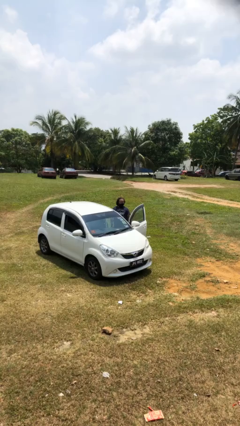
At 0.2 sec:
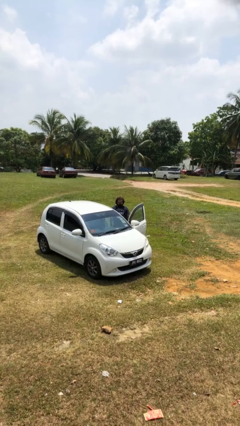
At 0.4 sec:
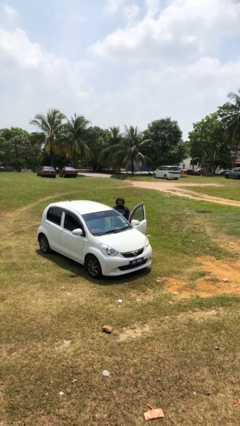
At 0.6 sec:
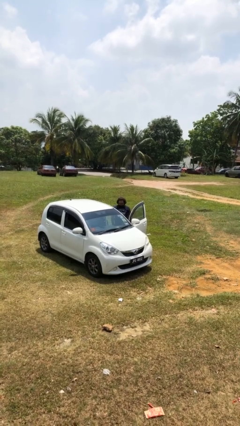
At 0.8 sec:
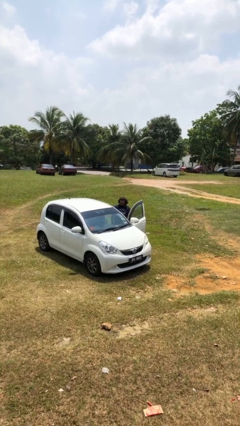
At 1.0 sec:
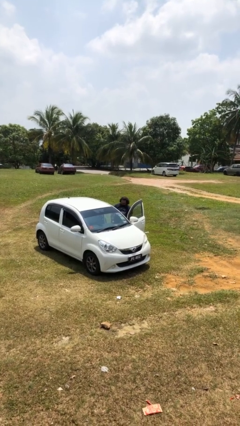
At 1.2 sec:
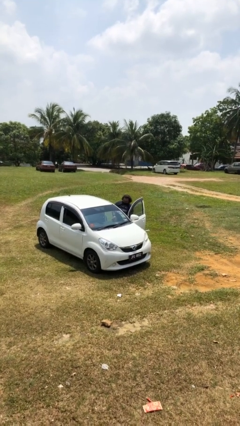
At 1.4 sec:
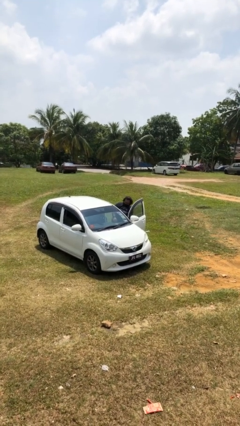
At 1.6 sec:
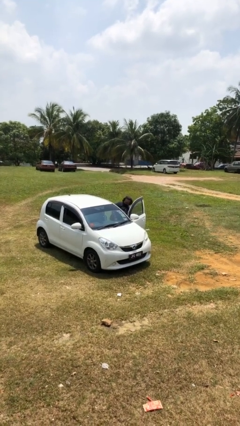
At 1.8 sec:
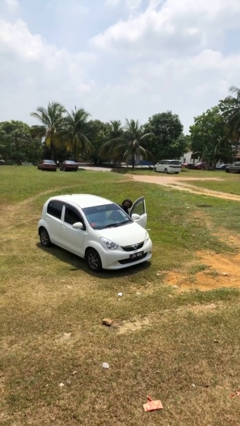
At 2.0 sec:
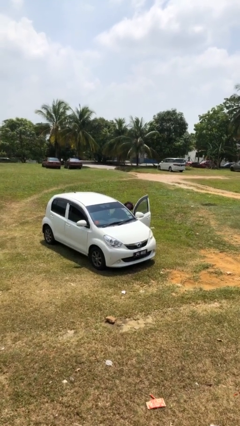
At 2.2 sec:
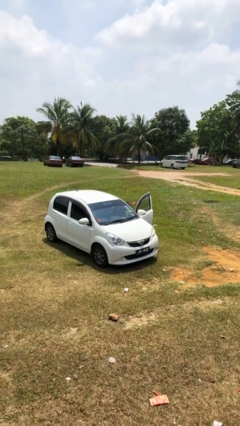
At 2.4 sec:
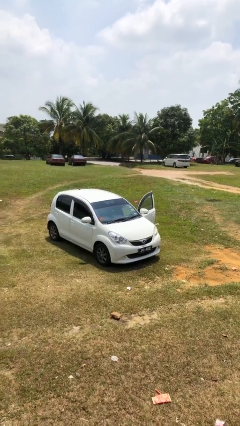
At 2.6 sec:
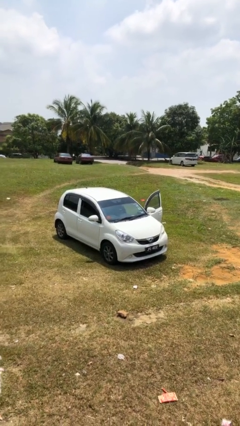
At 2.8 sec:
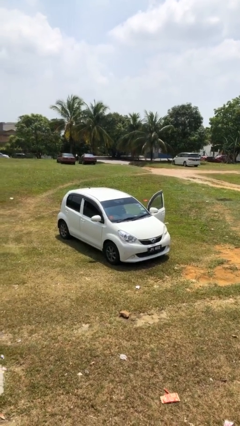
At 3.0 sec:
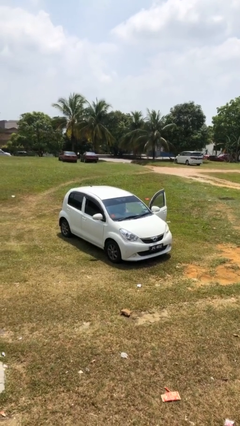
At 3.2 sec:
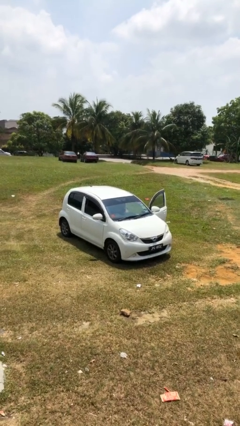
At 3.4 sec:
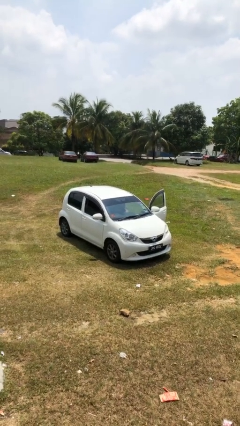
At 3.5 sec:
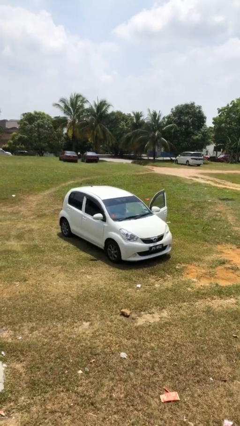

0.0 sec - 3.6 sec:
person enters car

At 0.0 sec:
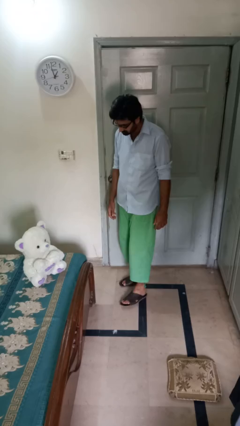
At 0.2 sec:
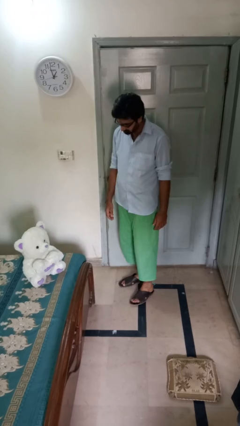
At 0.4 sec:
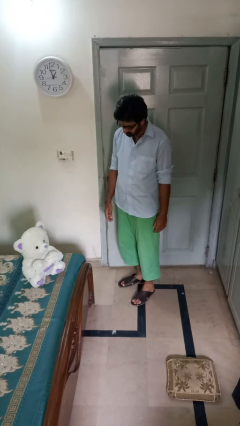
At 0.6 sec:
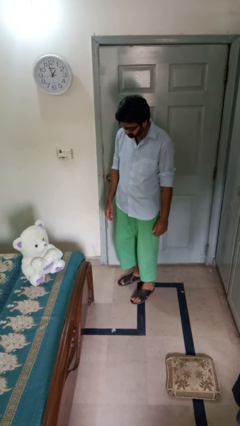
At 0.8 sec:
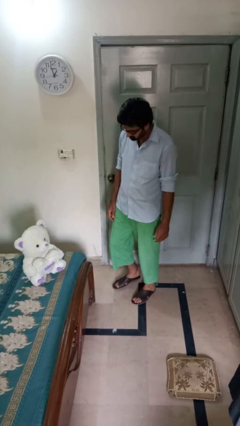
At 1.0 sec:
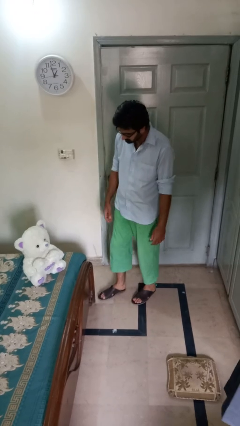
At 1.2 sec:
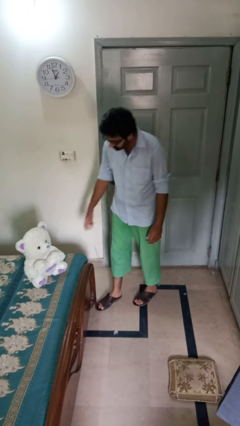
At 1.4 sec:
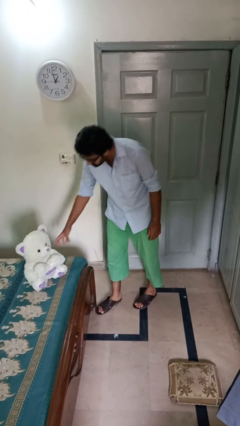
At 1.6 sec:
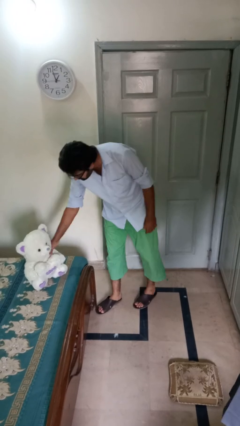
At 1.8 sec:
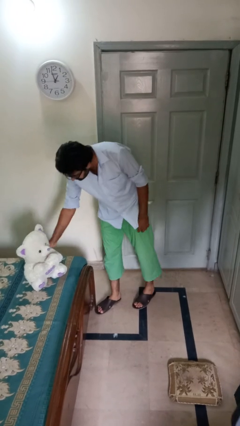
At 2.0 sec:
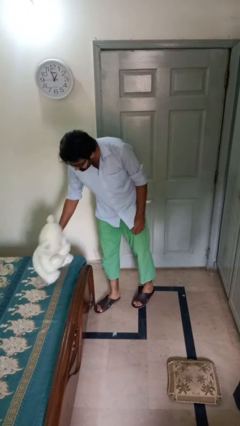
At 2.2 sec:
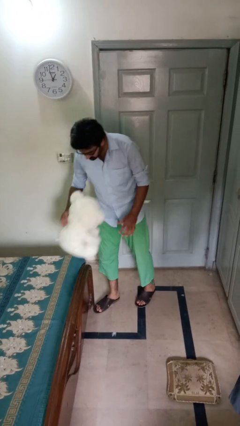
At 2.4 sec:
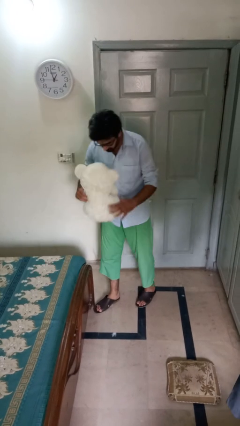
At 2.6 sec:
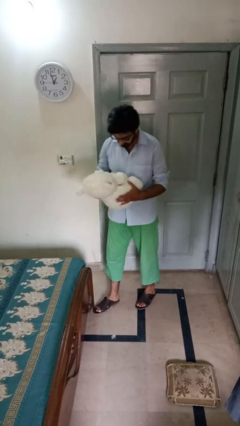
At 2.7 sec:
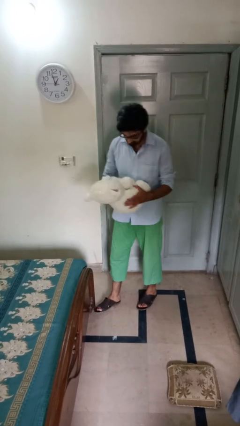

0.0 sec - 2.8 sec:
person picks up object from bed

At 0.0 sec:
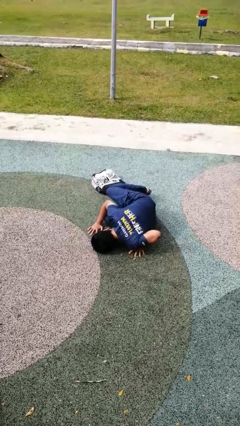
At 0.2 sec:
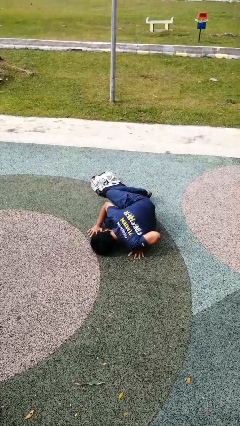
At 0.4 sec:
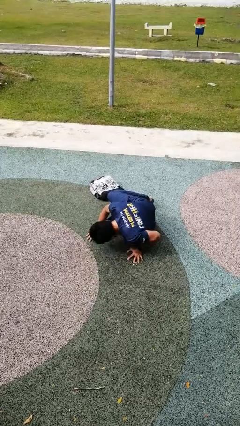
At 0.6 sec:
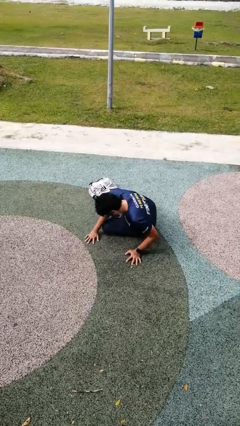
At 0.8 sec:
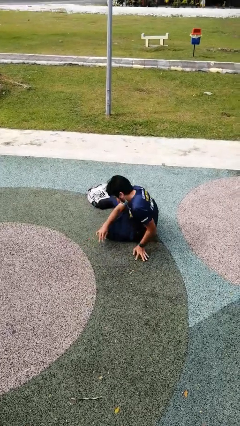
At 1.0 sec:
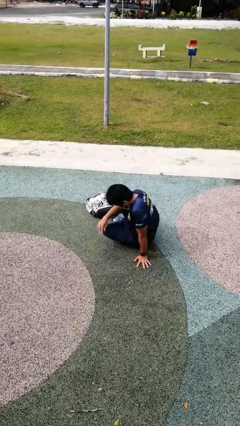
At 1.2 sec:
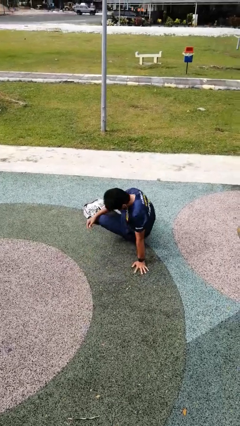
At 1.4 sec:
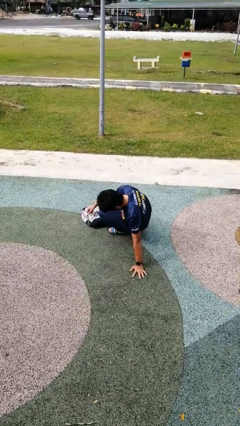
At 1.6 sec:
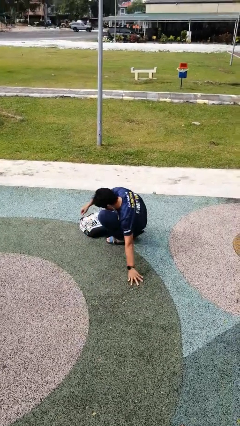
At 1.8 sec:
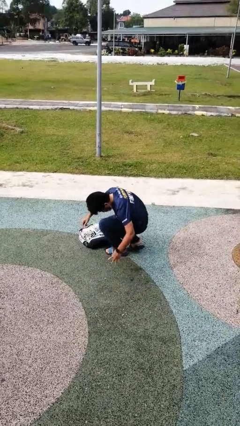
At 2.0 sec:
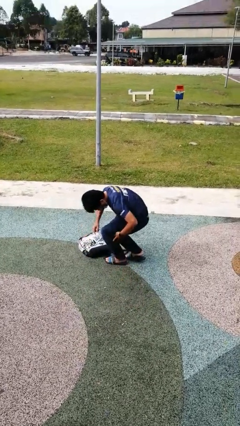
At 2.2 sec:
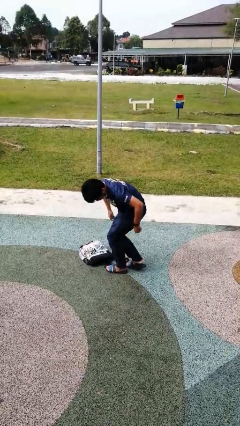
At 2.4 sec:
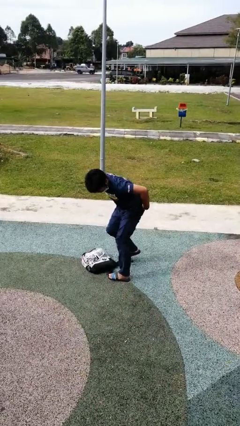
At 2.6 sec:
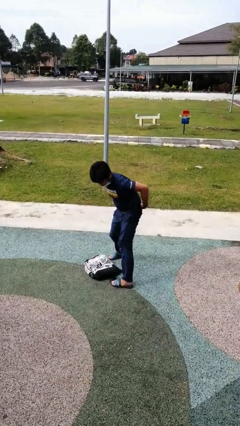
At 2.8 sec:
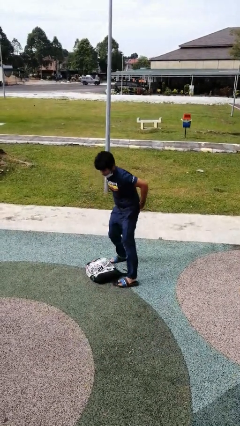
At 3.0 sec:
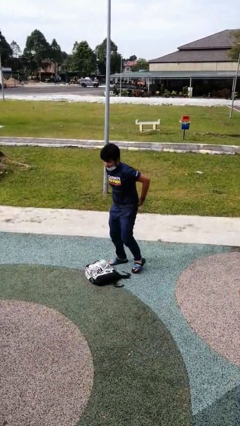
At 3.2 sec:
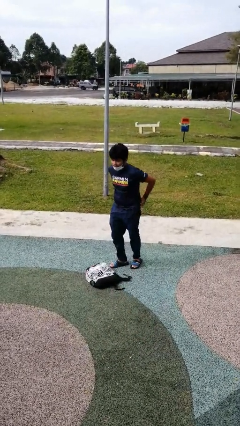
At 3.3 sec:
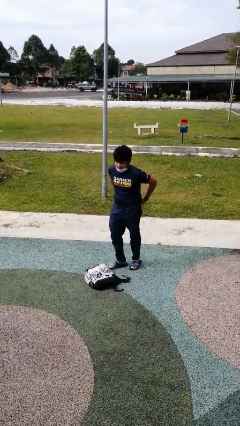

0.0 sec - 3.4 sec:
person stands up from floor

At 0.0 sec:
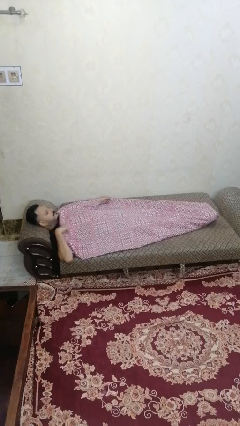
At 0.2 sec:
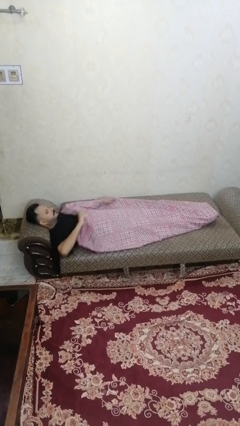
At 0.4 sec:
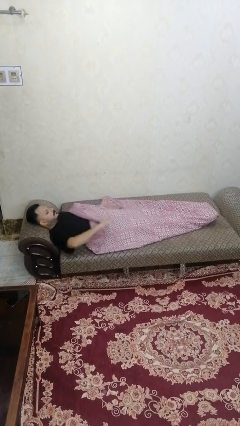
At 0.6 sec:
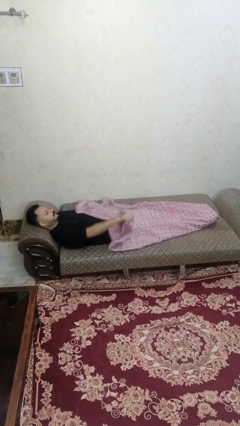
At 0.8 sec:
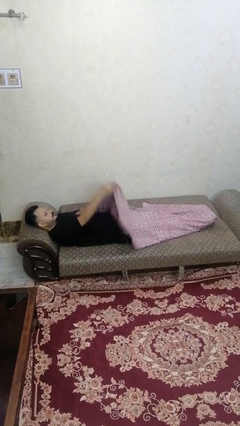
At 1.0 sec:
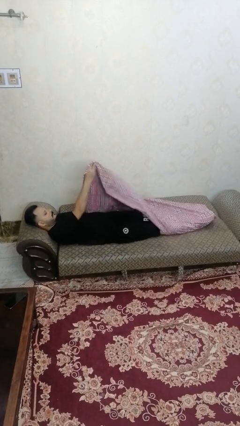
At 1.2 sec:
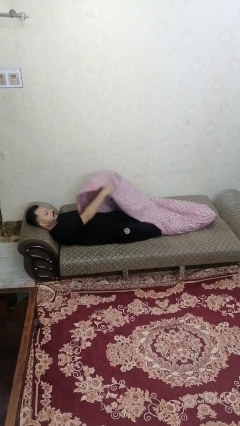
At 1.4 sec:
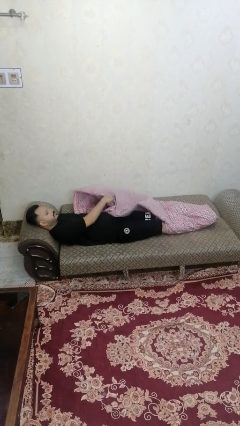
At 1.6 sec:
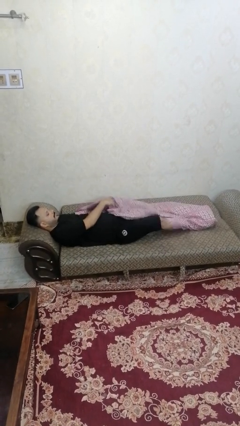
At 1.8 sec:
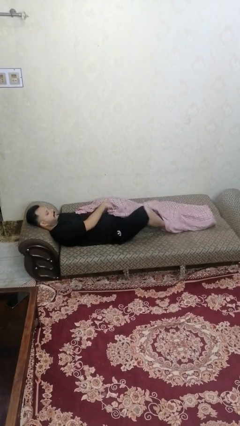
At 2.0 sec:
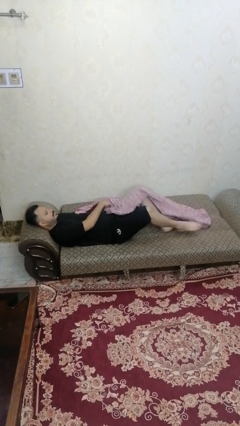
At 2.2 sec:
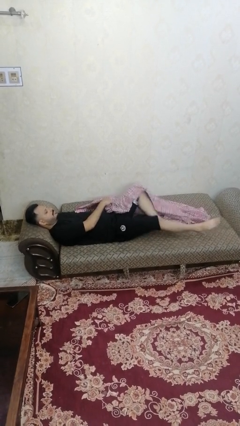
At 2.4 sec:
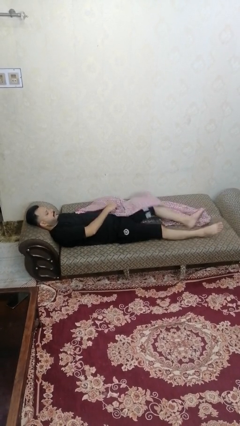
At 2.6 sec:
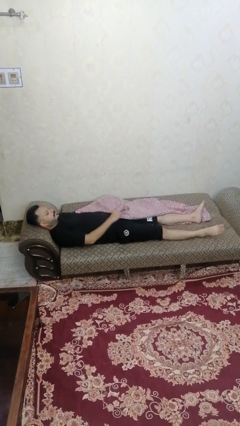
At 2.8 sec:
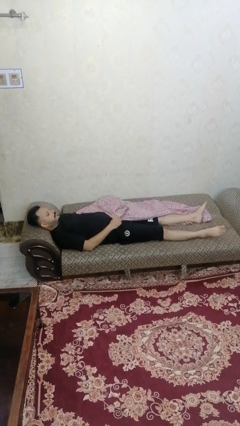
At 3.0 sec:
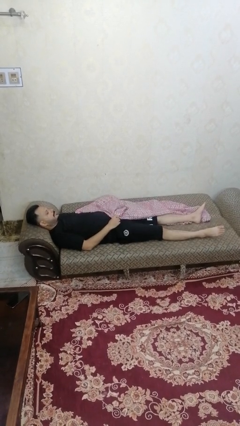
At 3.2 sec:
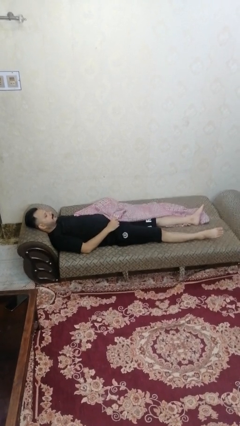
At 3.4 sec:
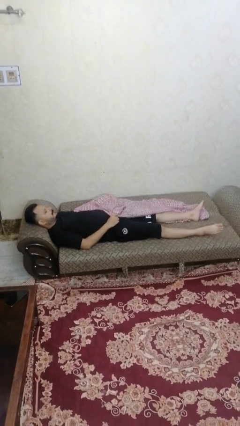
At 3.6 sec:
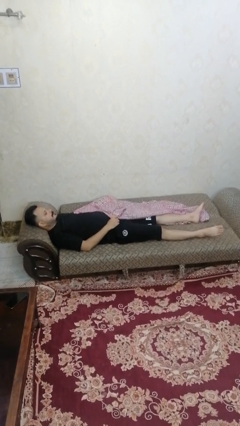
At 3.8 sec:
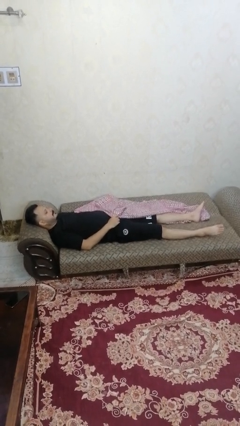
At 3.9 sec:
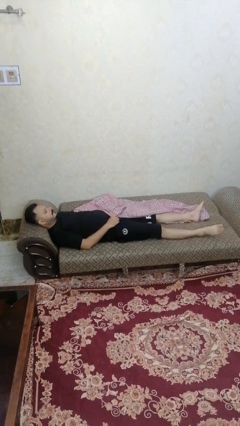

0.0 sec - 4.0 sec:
person uncovers with bedsheets

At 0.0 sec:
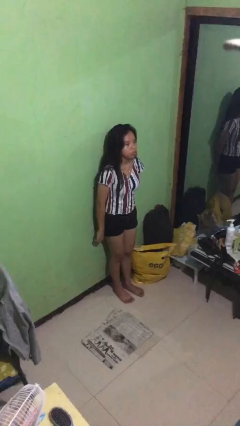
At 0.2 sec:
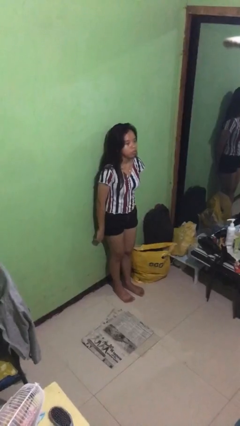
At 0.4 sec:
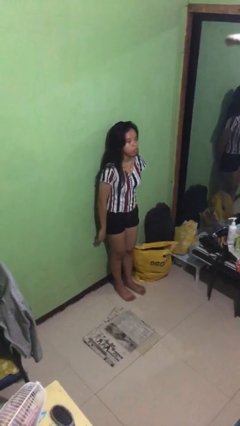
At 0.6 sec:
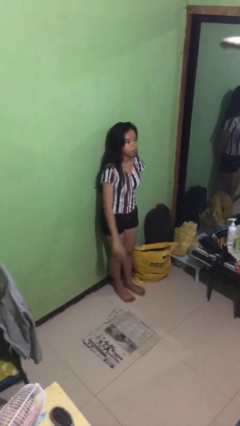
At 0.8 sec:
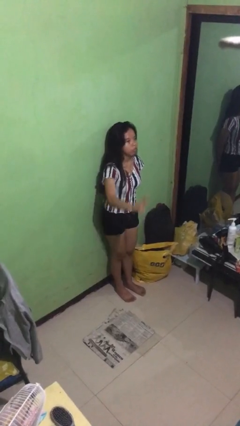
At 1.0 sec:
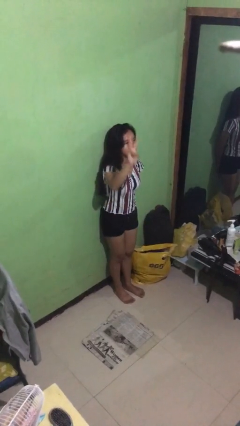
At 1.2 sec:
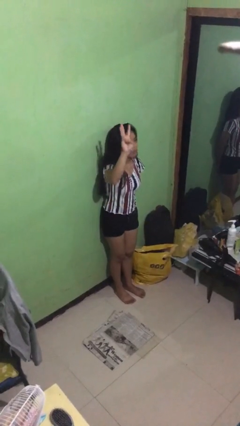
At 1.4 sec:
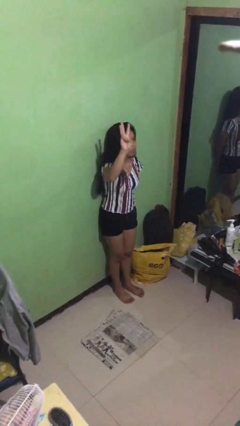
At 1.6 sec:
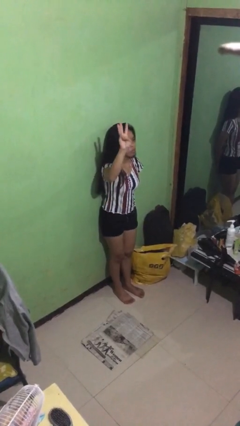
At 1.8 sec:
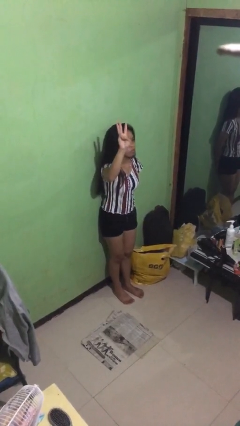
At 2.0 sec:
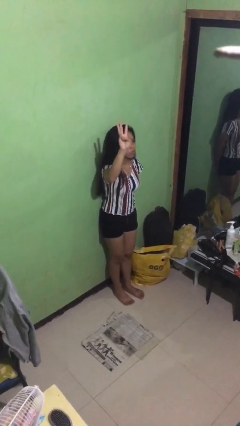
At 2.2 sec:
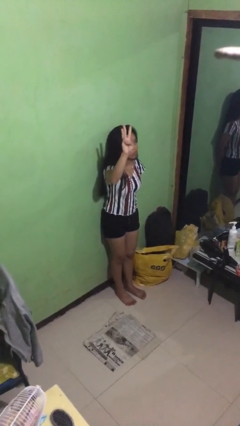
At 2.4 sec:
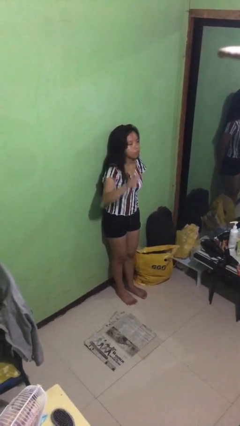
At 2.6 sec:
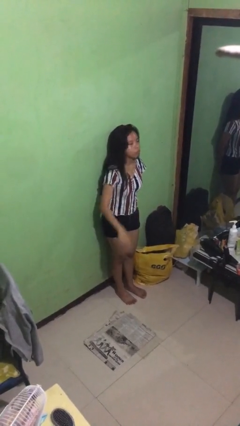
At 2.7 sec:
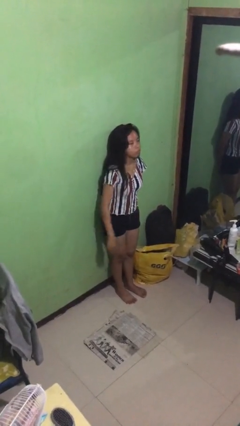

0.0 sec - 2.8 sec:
person gestures number three

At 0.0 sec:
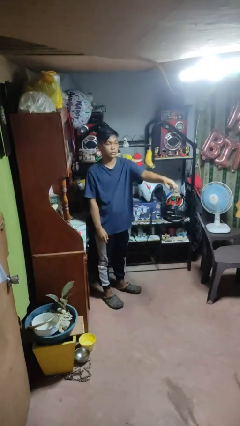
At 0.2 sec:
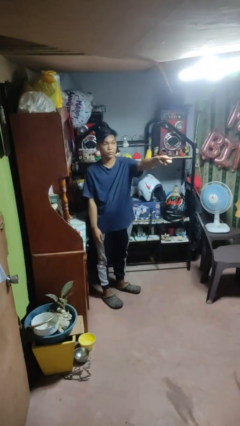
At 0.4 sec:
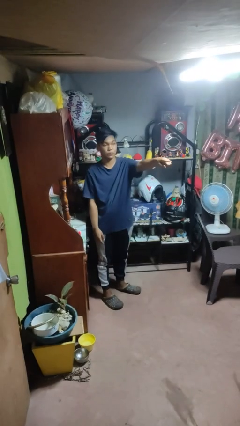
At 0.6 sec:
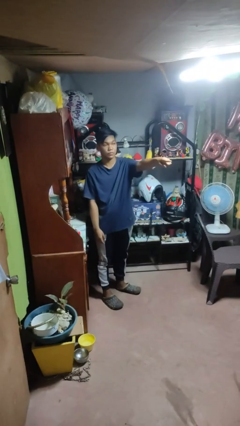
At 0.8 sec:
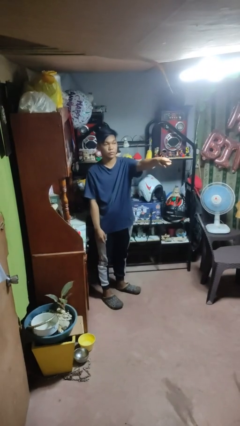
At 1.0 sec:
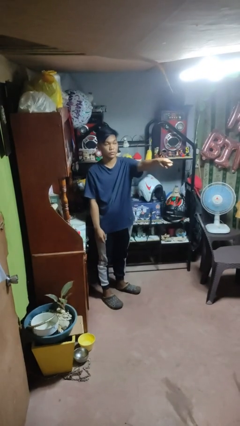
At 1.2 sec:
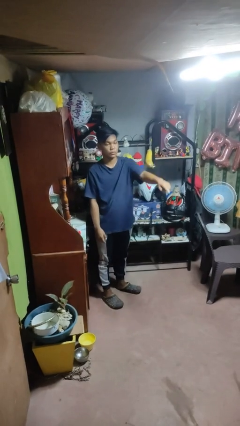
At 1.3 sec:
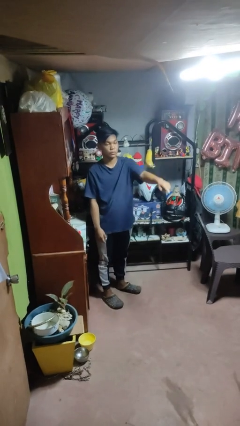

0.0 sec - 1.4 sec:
person points at person
